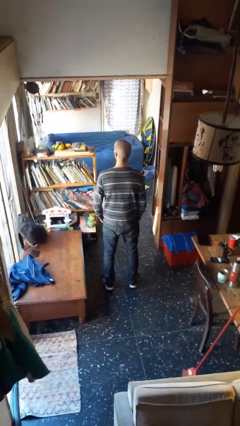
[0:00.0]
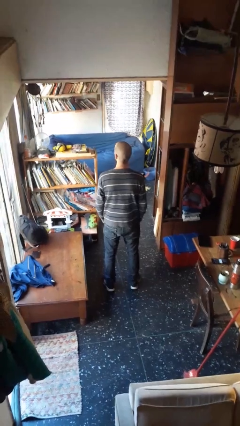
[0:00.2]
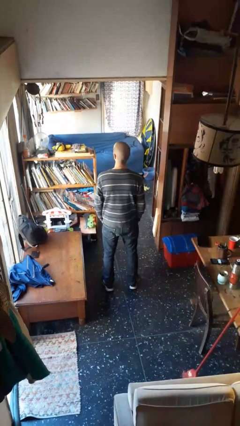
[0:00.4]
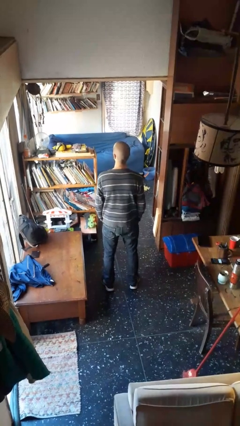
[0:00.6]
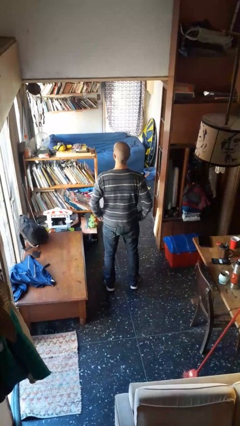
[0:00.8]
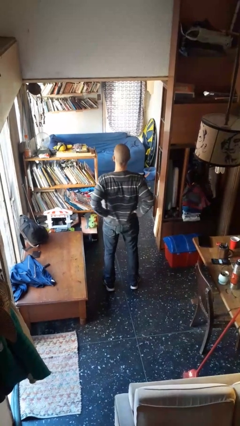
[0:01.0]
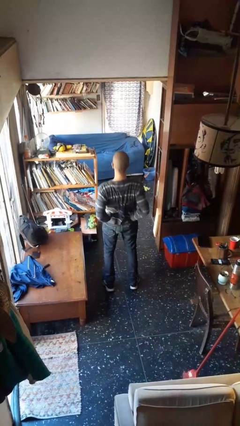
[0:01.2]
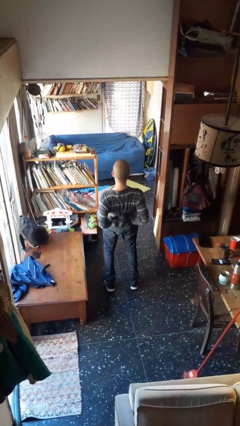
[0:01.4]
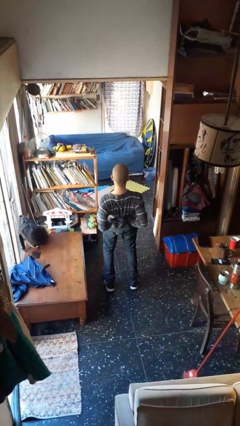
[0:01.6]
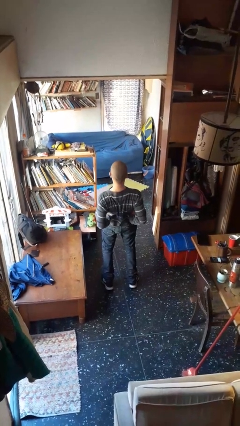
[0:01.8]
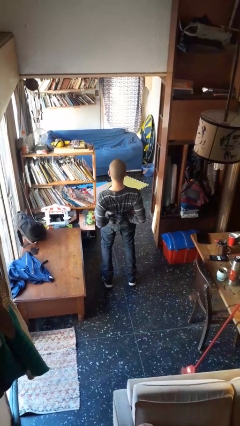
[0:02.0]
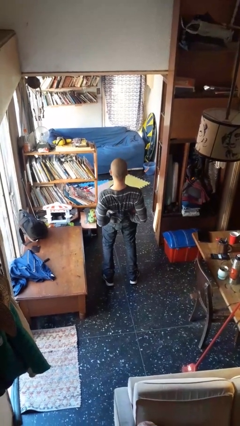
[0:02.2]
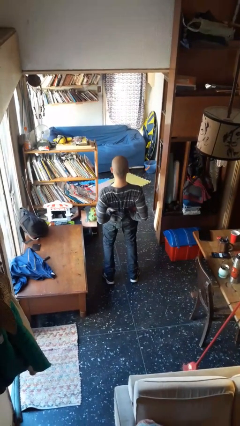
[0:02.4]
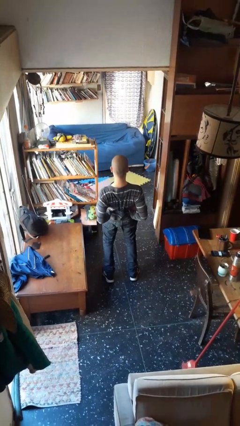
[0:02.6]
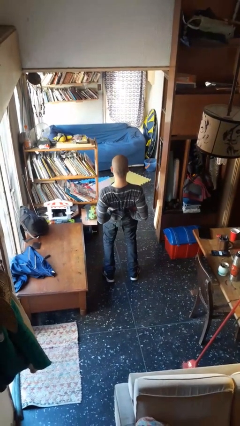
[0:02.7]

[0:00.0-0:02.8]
person stretches back

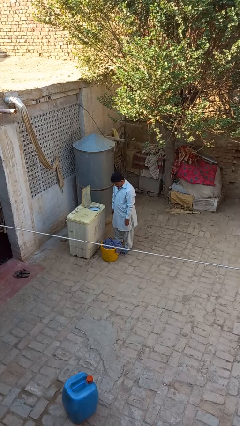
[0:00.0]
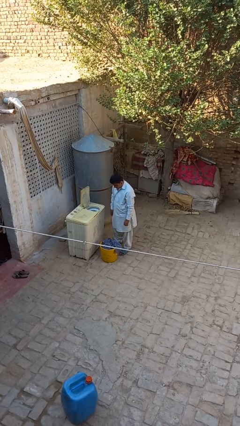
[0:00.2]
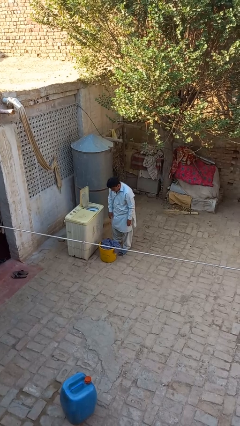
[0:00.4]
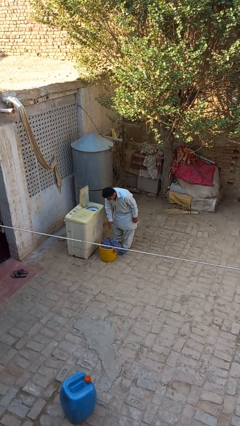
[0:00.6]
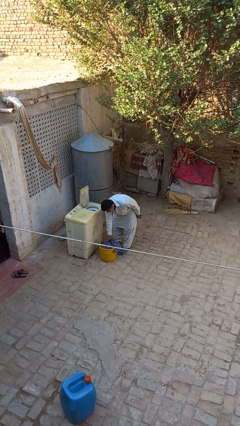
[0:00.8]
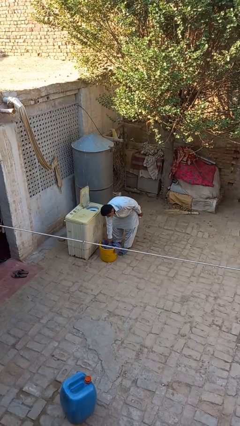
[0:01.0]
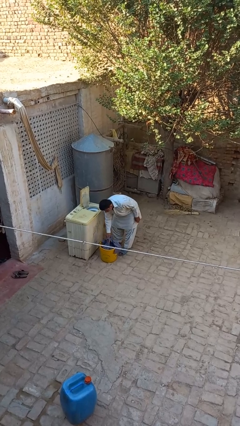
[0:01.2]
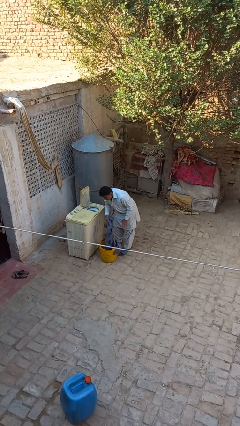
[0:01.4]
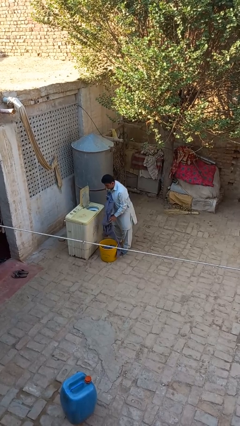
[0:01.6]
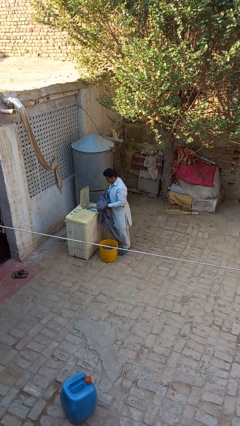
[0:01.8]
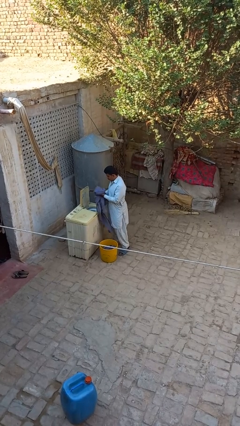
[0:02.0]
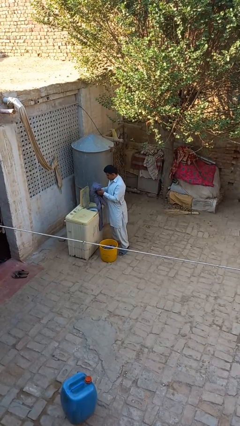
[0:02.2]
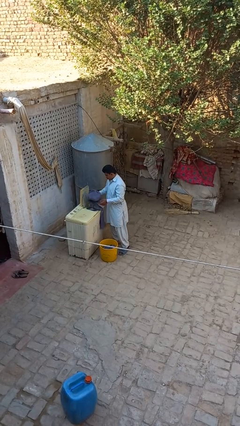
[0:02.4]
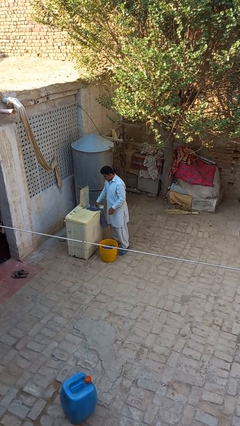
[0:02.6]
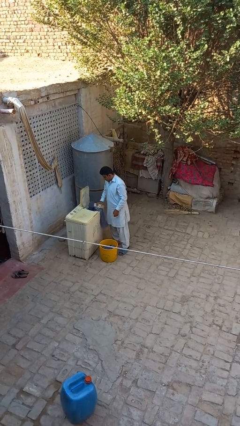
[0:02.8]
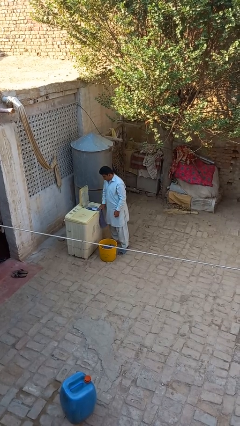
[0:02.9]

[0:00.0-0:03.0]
person loads dryer

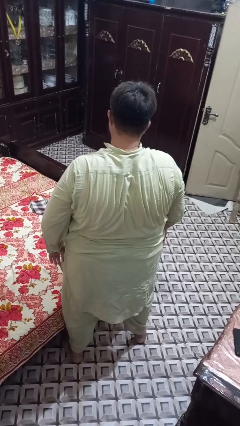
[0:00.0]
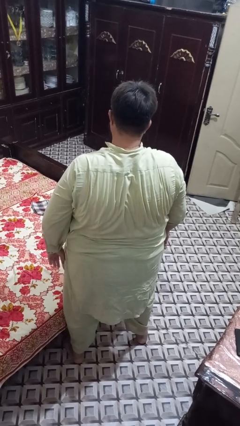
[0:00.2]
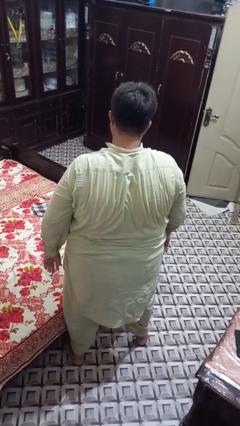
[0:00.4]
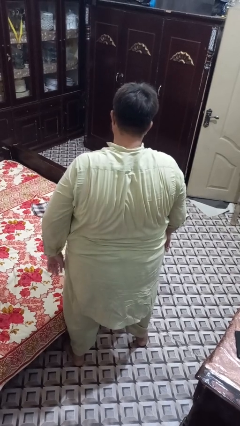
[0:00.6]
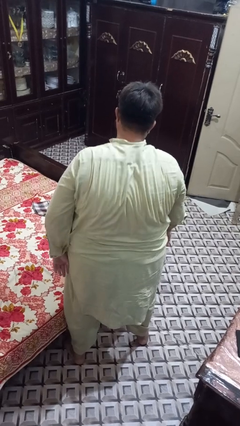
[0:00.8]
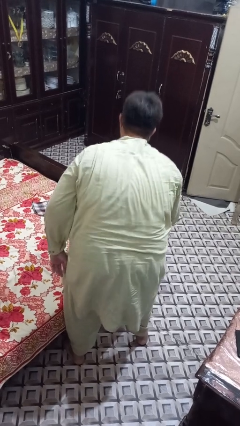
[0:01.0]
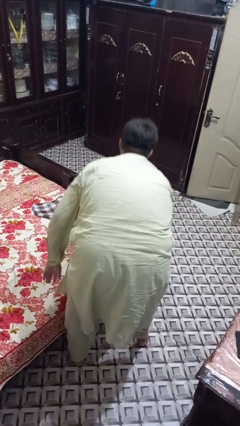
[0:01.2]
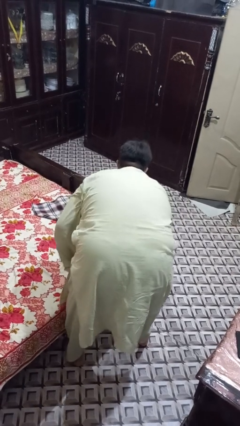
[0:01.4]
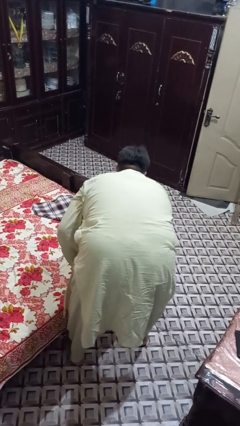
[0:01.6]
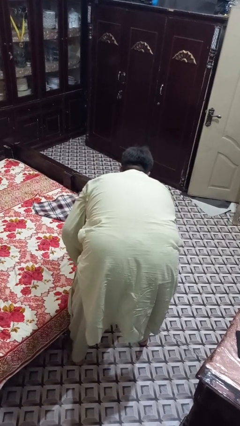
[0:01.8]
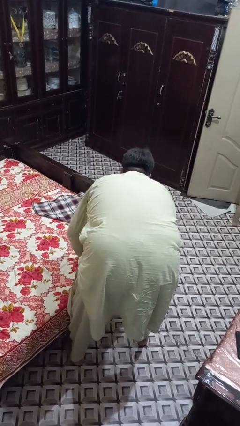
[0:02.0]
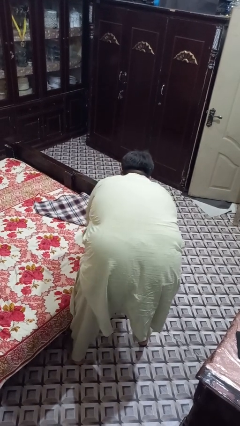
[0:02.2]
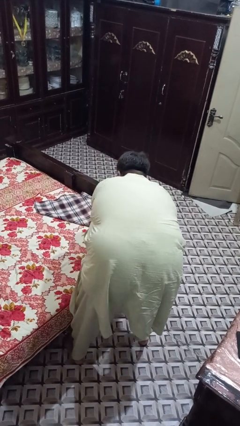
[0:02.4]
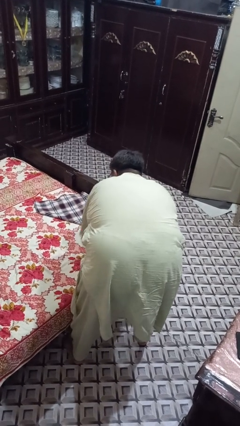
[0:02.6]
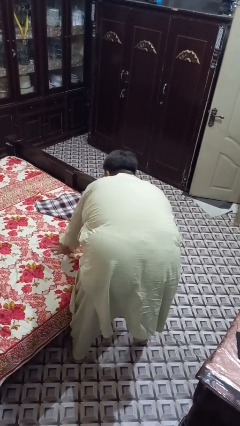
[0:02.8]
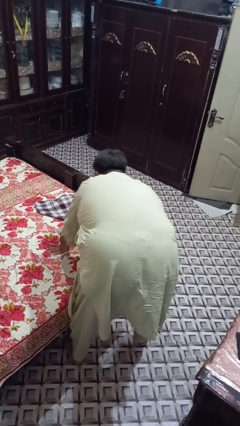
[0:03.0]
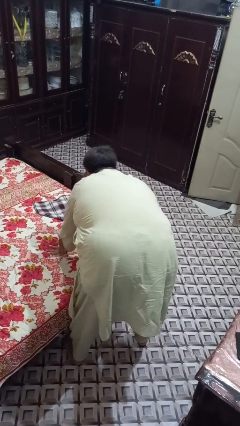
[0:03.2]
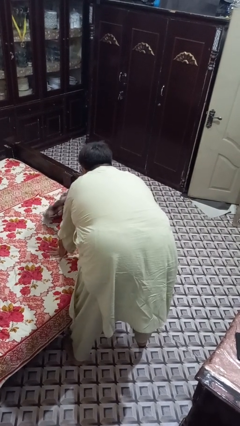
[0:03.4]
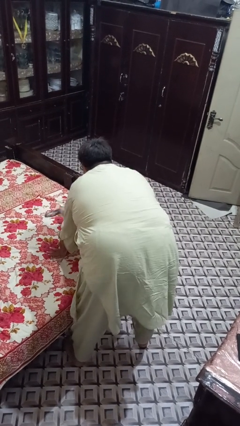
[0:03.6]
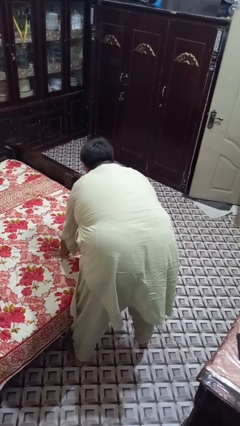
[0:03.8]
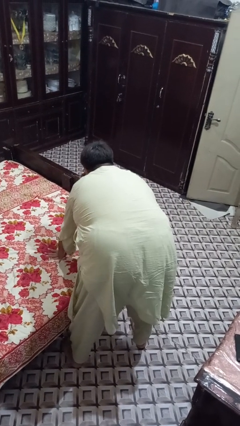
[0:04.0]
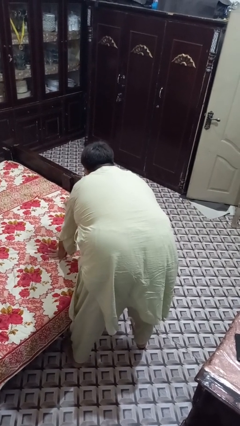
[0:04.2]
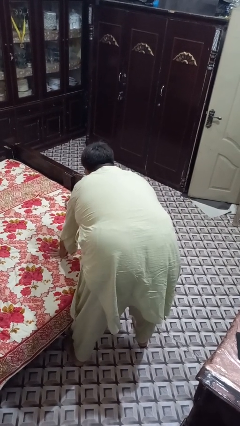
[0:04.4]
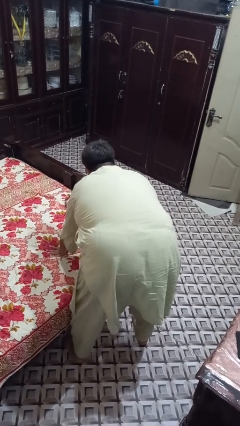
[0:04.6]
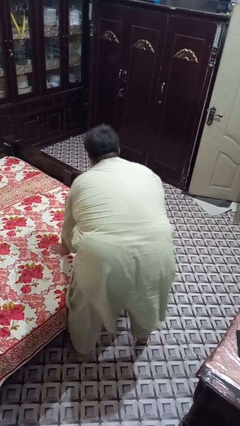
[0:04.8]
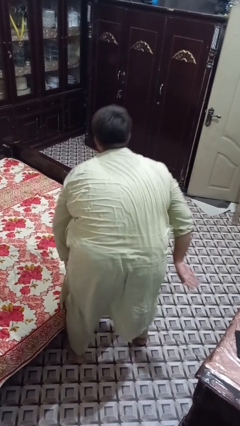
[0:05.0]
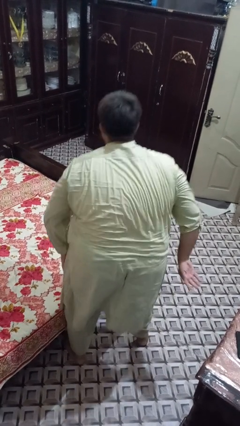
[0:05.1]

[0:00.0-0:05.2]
person makes bed

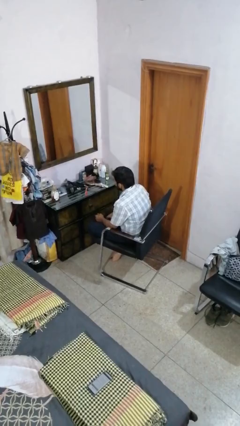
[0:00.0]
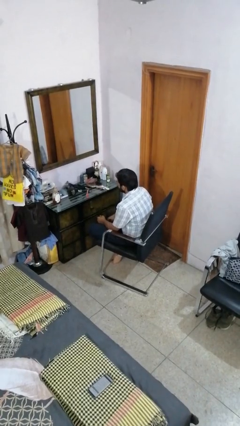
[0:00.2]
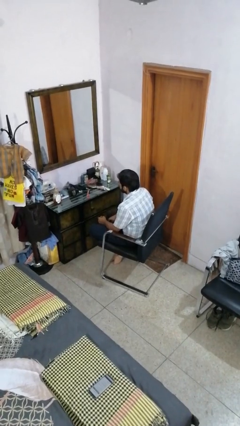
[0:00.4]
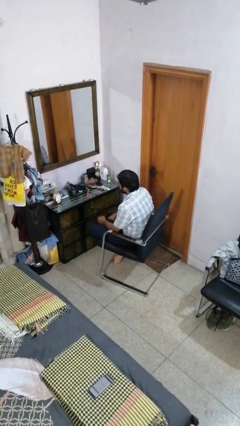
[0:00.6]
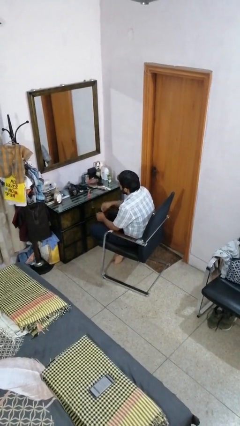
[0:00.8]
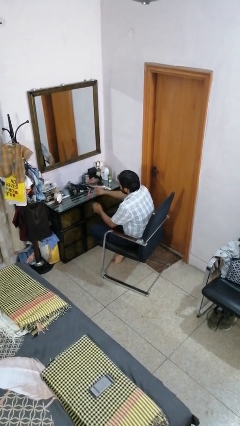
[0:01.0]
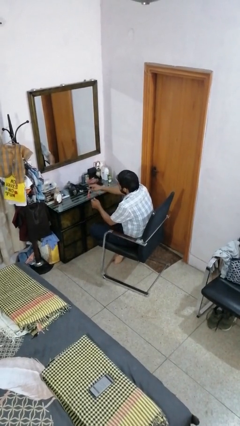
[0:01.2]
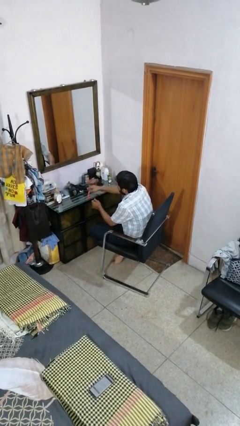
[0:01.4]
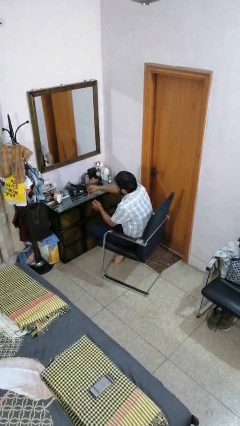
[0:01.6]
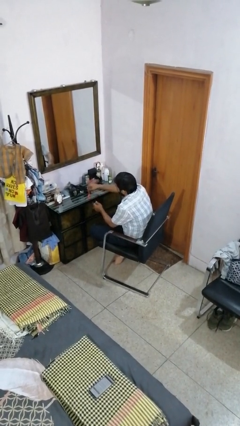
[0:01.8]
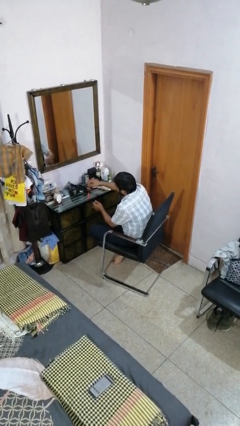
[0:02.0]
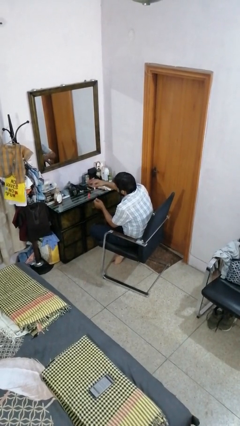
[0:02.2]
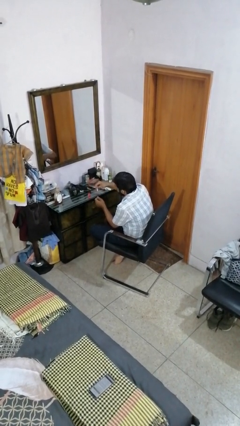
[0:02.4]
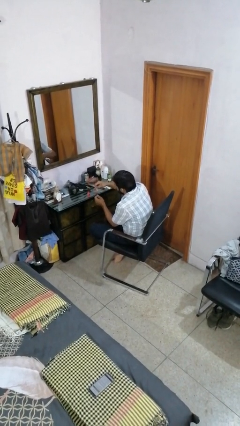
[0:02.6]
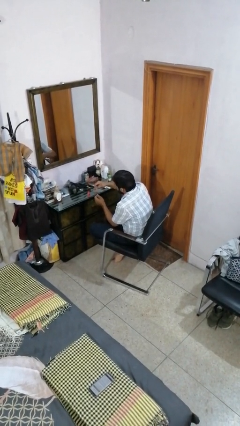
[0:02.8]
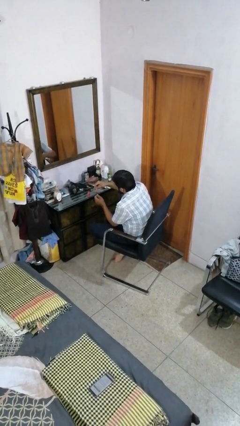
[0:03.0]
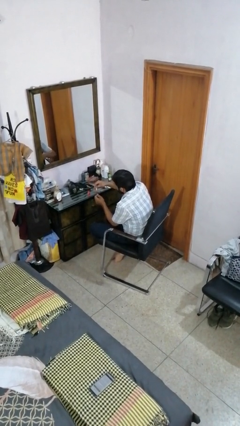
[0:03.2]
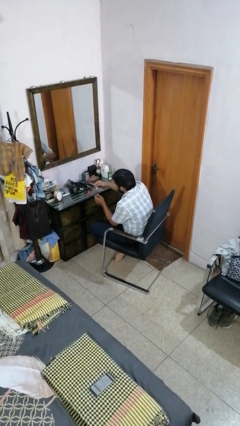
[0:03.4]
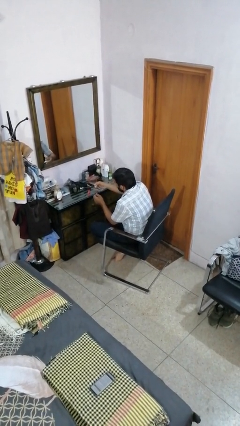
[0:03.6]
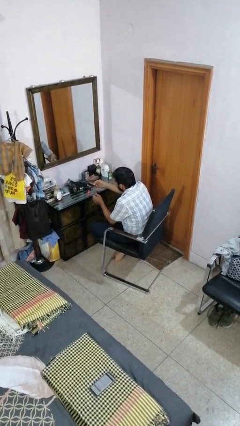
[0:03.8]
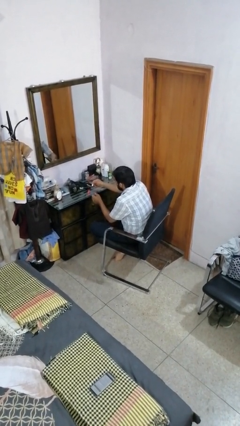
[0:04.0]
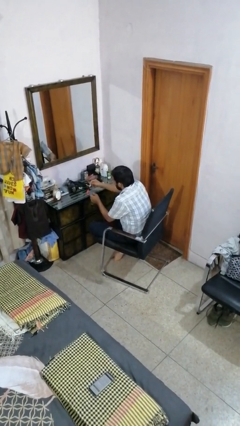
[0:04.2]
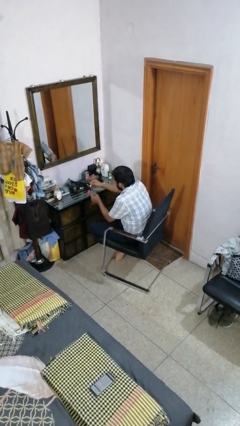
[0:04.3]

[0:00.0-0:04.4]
person paints fingernails

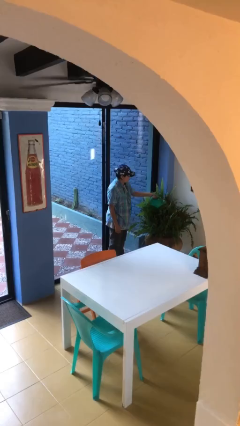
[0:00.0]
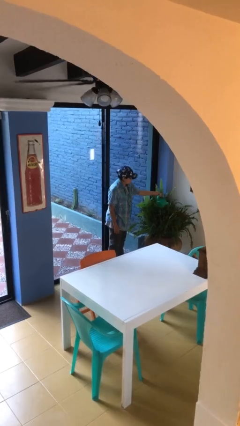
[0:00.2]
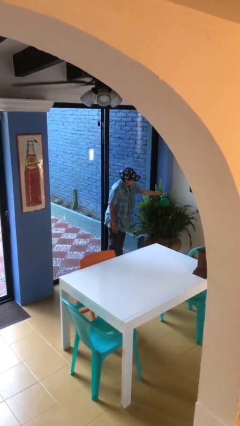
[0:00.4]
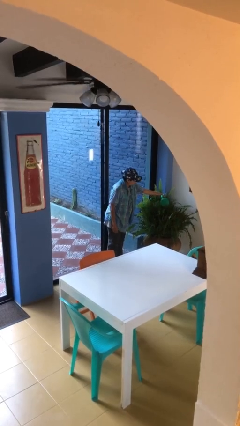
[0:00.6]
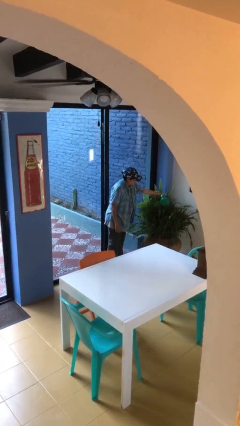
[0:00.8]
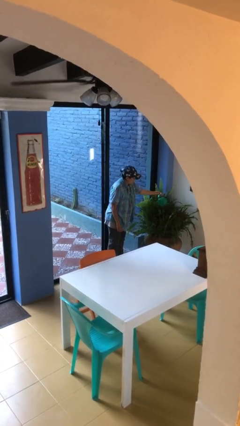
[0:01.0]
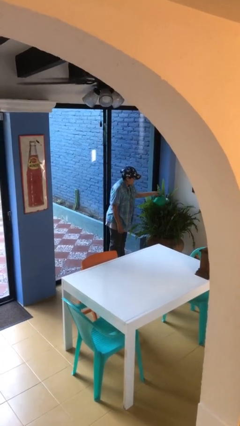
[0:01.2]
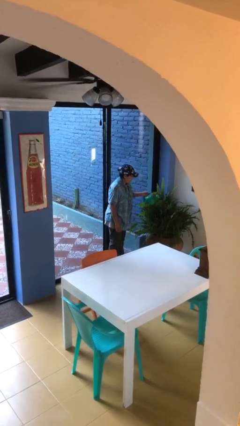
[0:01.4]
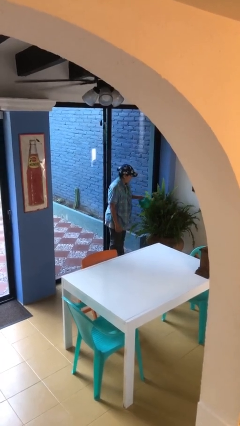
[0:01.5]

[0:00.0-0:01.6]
person waters houseplant

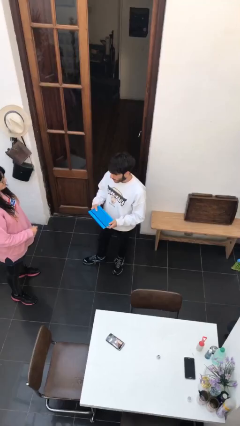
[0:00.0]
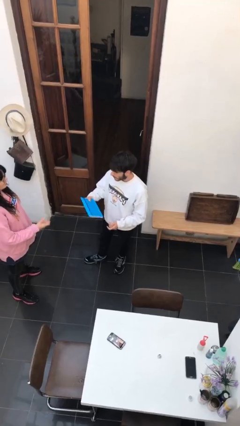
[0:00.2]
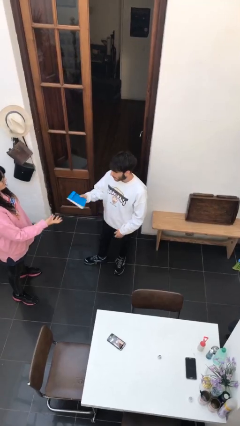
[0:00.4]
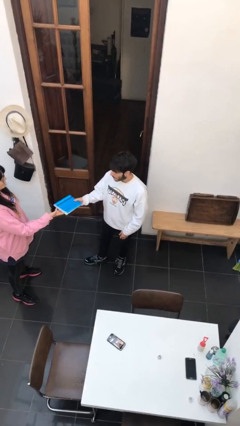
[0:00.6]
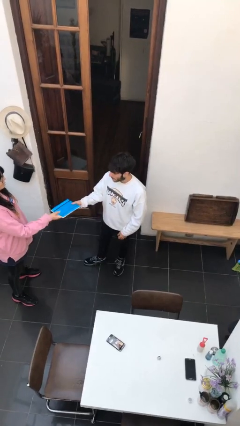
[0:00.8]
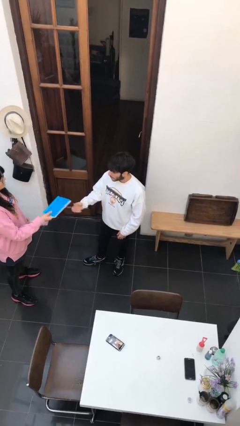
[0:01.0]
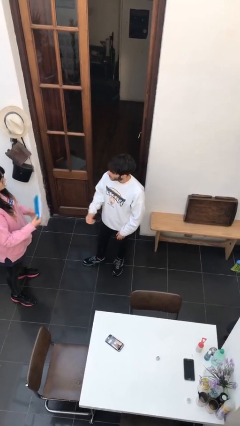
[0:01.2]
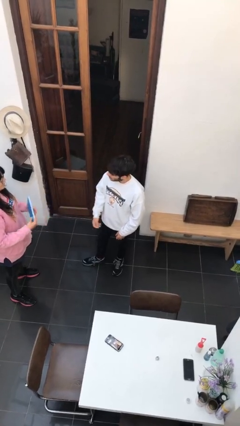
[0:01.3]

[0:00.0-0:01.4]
person transfers object to person
